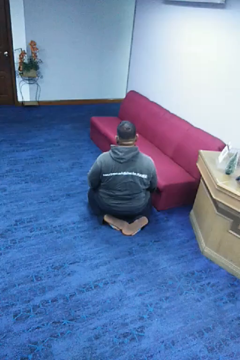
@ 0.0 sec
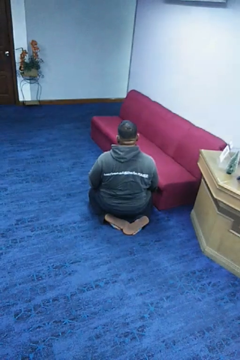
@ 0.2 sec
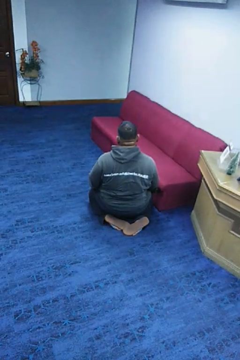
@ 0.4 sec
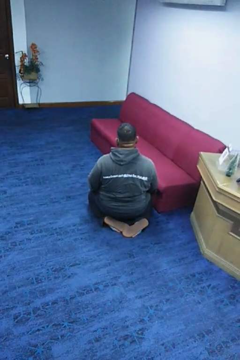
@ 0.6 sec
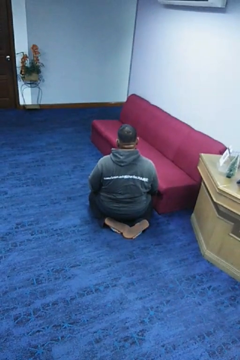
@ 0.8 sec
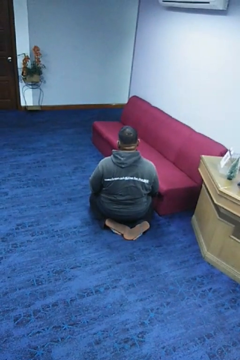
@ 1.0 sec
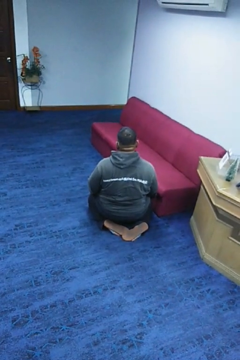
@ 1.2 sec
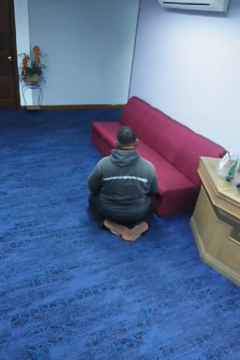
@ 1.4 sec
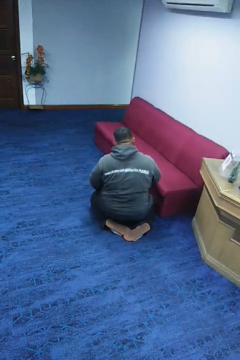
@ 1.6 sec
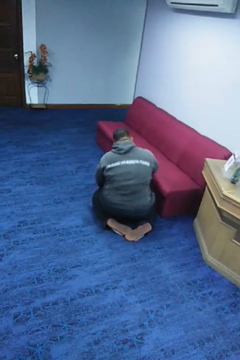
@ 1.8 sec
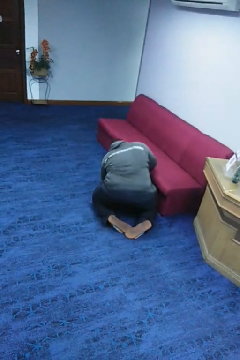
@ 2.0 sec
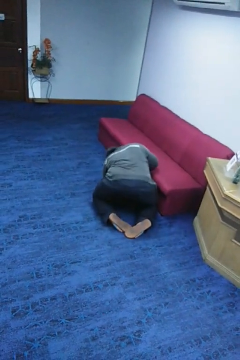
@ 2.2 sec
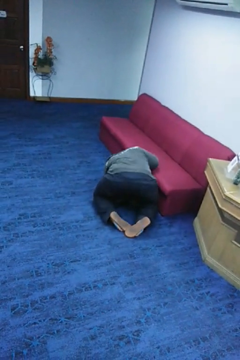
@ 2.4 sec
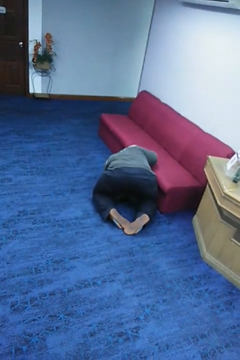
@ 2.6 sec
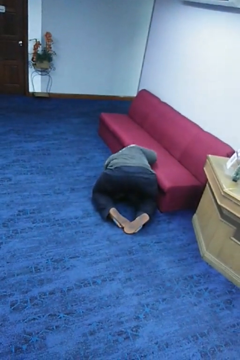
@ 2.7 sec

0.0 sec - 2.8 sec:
person searches under couch

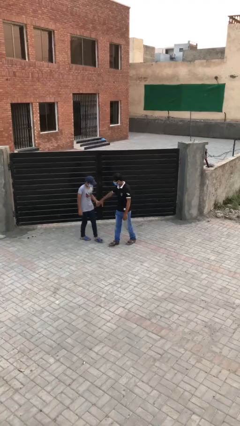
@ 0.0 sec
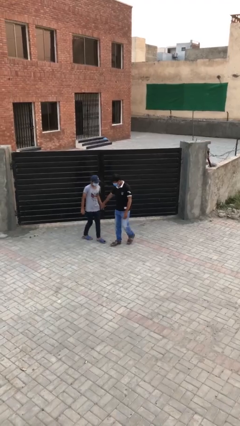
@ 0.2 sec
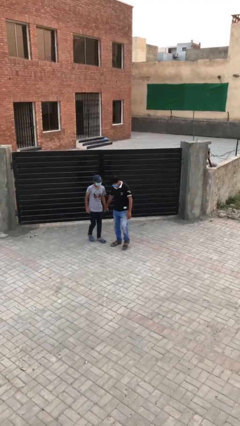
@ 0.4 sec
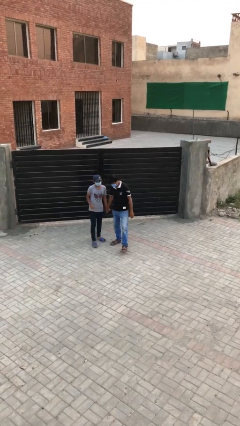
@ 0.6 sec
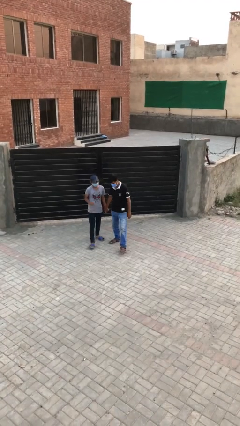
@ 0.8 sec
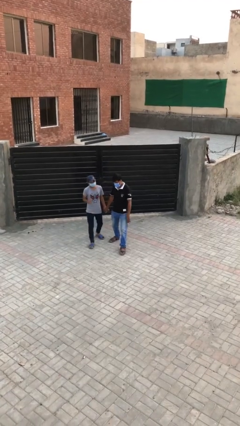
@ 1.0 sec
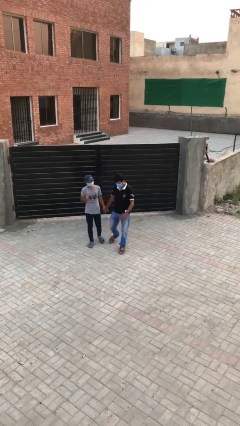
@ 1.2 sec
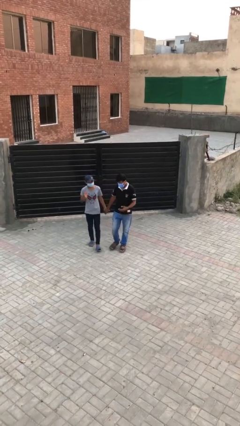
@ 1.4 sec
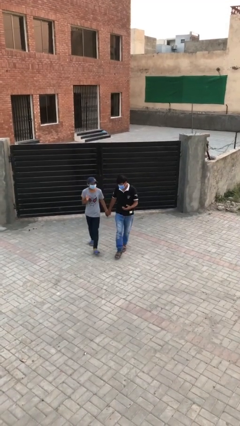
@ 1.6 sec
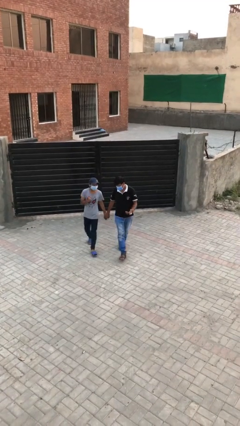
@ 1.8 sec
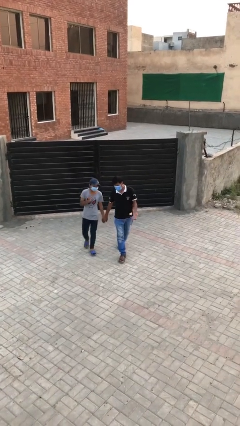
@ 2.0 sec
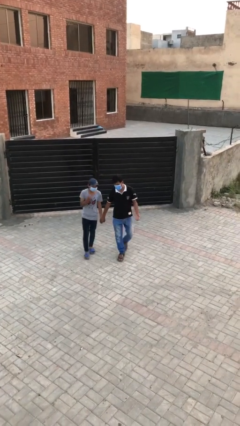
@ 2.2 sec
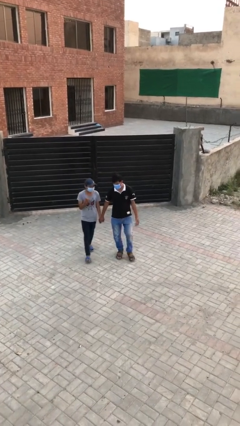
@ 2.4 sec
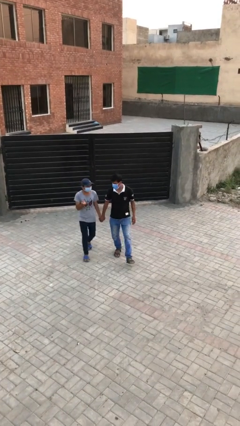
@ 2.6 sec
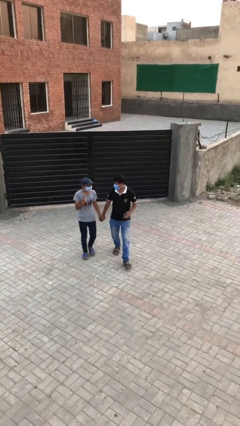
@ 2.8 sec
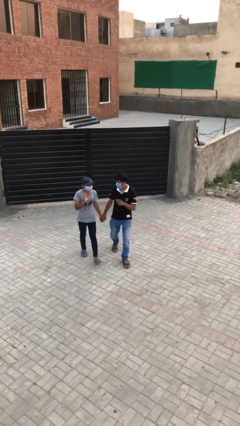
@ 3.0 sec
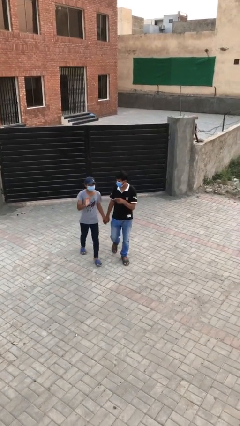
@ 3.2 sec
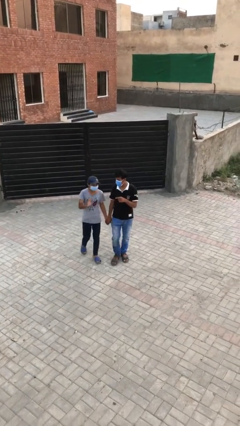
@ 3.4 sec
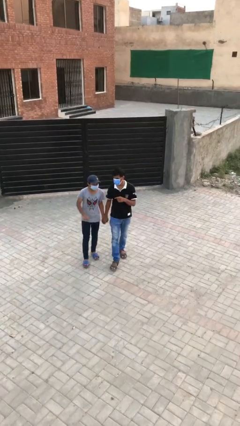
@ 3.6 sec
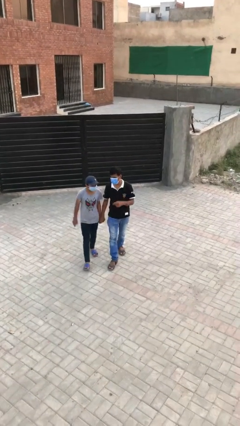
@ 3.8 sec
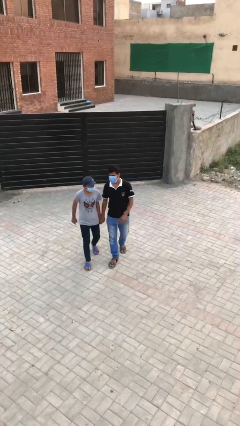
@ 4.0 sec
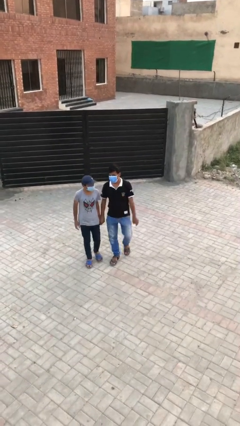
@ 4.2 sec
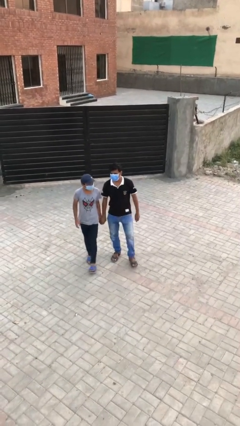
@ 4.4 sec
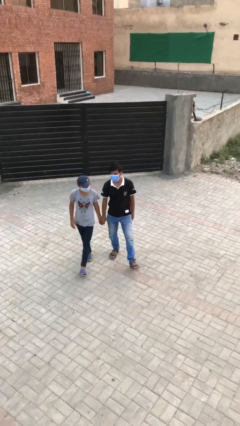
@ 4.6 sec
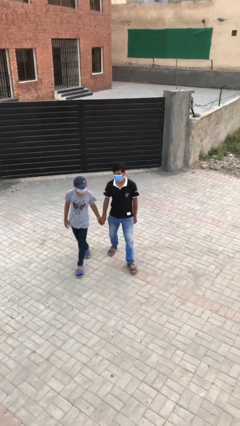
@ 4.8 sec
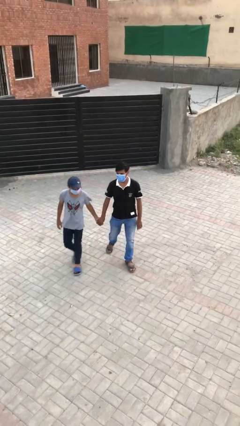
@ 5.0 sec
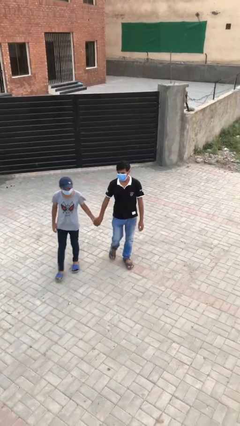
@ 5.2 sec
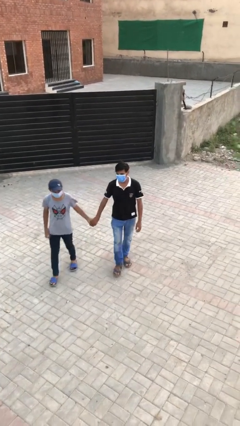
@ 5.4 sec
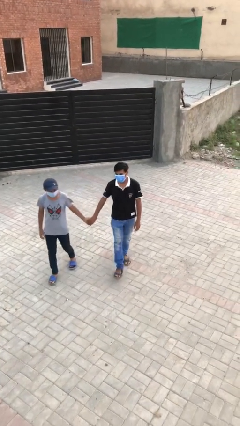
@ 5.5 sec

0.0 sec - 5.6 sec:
person holds hand

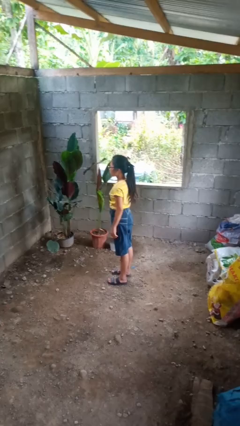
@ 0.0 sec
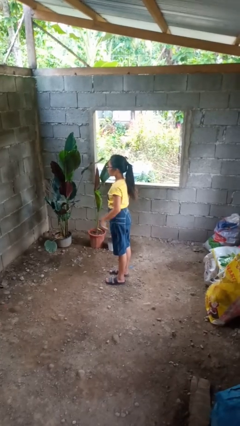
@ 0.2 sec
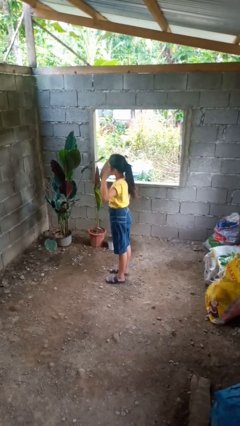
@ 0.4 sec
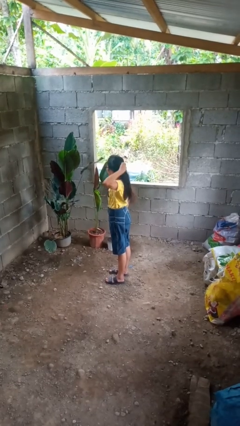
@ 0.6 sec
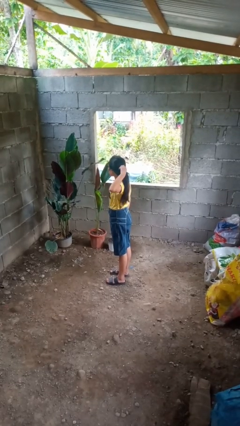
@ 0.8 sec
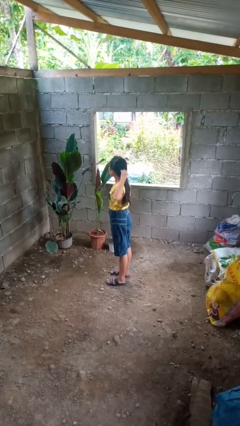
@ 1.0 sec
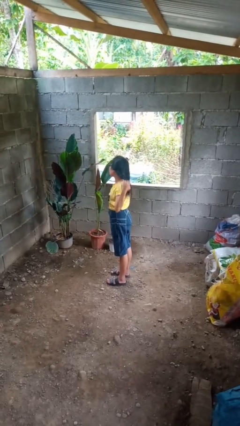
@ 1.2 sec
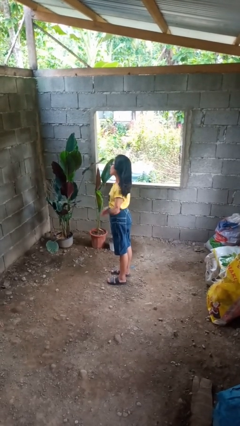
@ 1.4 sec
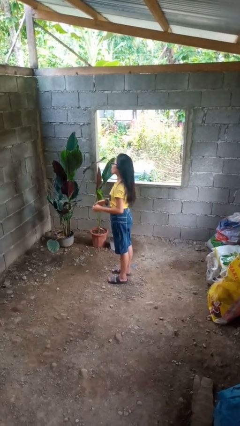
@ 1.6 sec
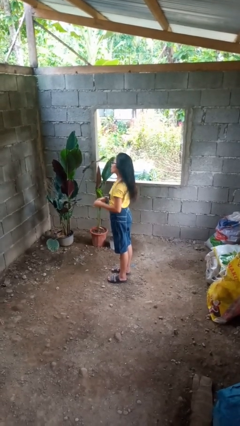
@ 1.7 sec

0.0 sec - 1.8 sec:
person takes off hairtie

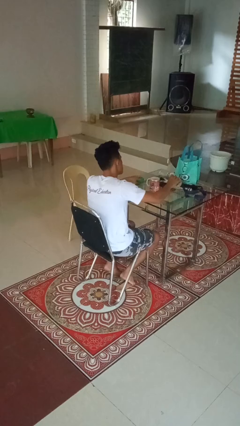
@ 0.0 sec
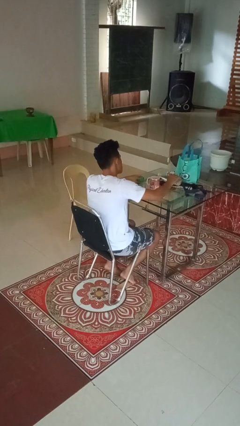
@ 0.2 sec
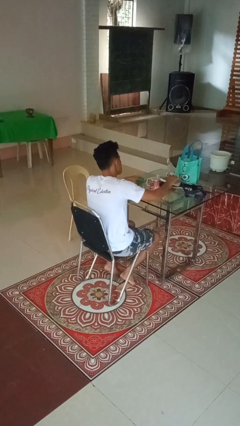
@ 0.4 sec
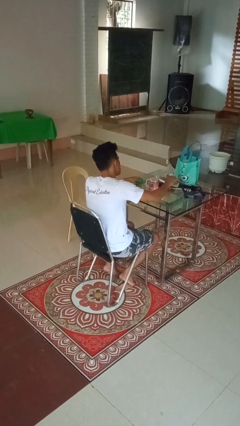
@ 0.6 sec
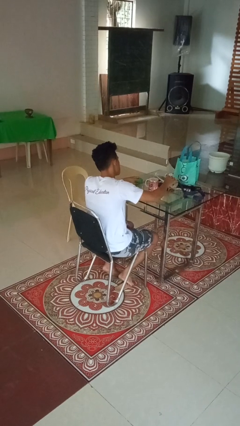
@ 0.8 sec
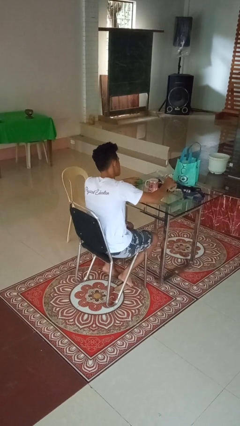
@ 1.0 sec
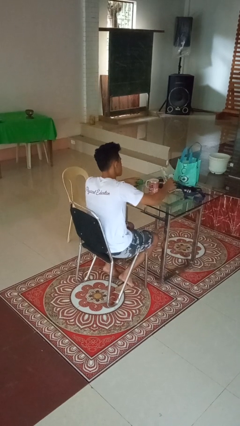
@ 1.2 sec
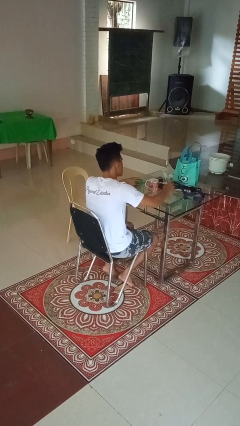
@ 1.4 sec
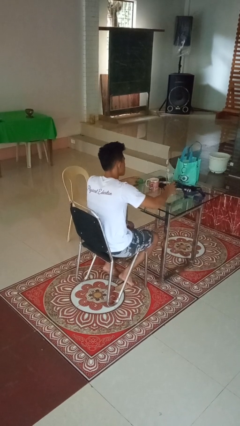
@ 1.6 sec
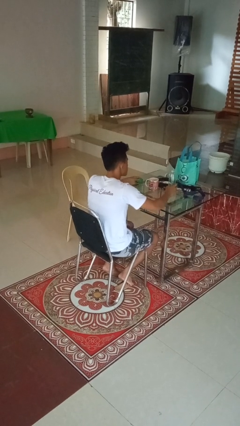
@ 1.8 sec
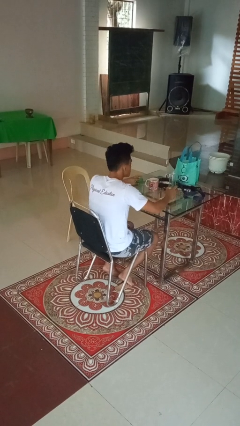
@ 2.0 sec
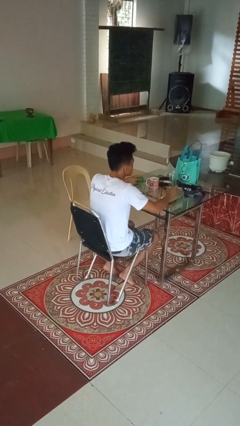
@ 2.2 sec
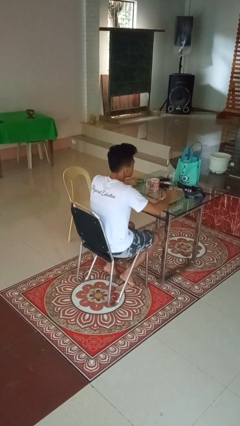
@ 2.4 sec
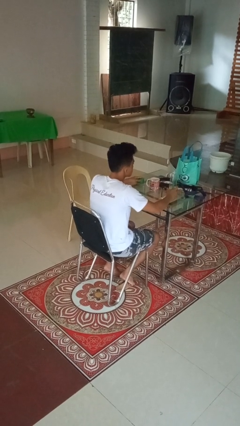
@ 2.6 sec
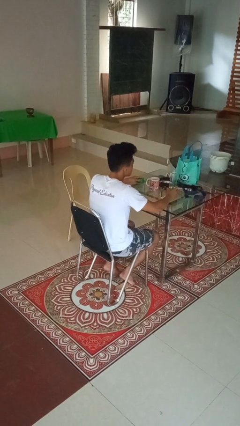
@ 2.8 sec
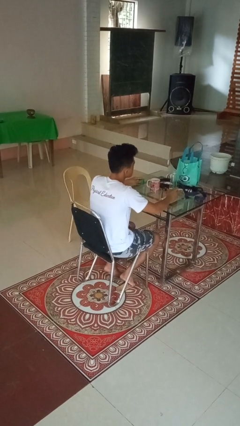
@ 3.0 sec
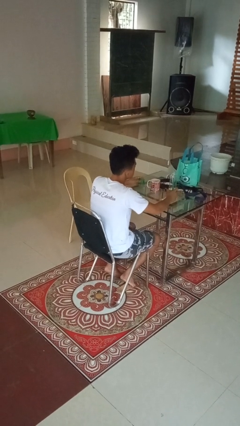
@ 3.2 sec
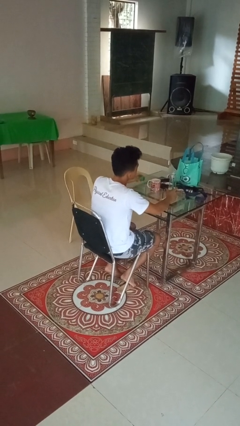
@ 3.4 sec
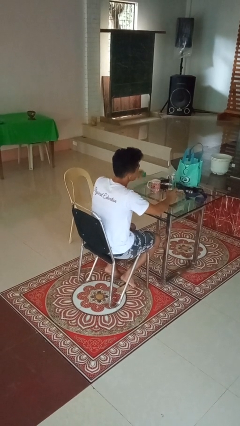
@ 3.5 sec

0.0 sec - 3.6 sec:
person pours liquid into cup

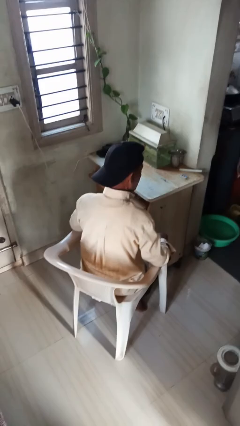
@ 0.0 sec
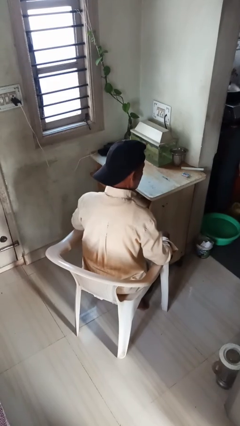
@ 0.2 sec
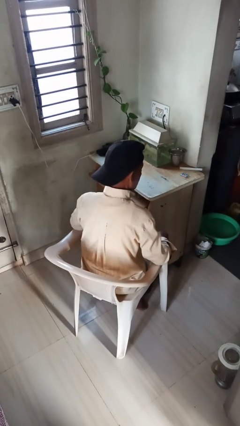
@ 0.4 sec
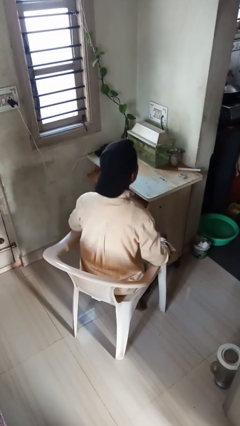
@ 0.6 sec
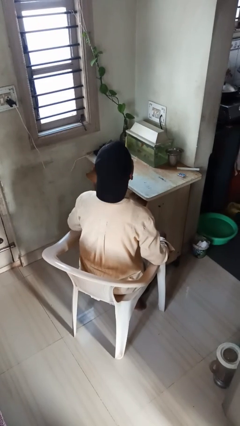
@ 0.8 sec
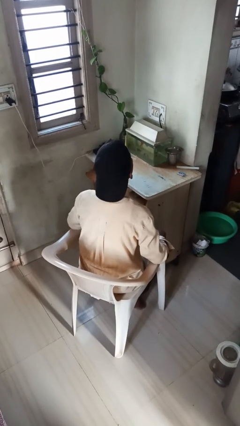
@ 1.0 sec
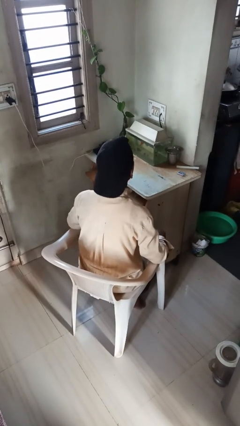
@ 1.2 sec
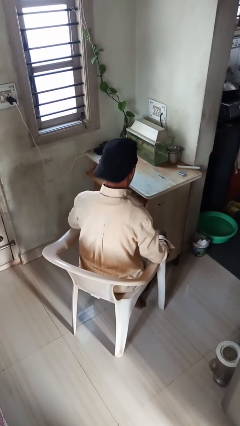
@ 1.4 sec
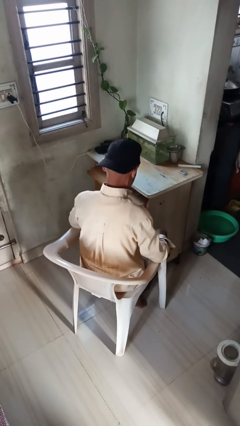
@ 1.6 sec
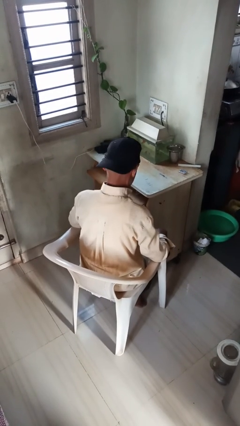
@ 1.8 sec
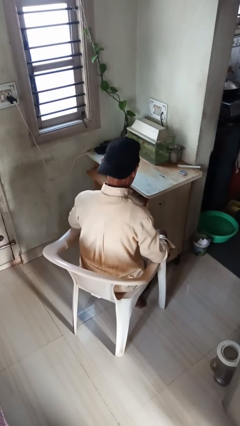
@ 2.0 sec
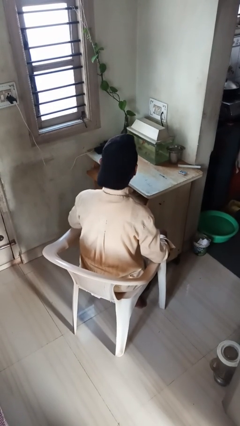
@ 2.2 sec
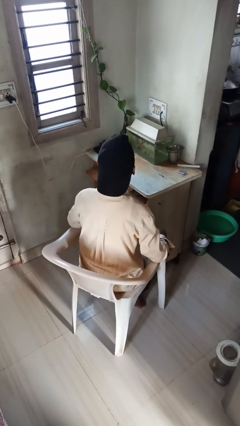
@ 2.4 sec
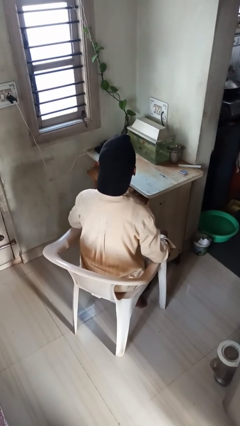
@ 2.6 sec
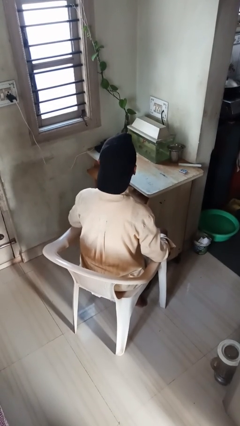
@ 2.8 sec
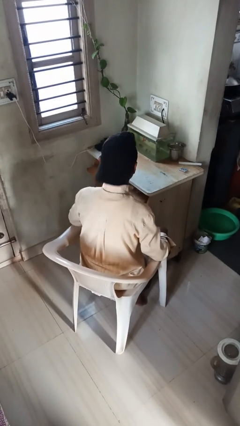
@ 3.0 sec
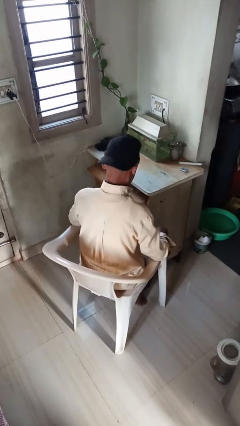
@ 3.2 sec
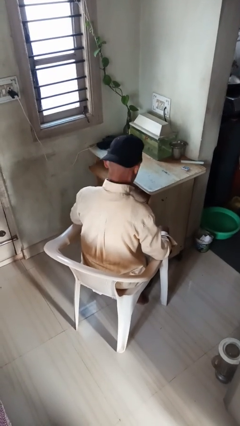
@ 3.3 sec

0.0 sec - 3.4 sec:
person nods head

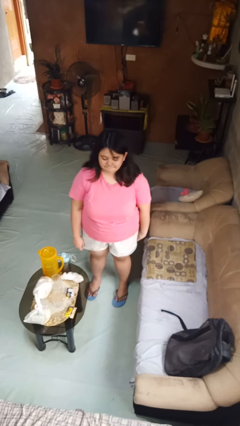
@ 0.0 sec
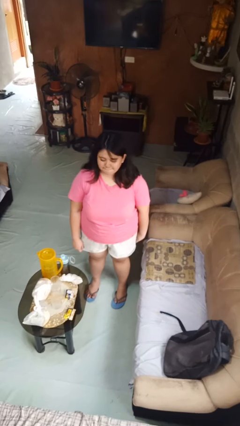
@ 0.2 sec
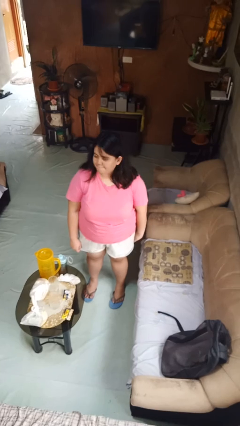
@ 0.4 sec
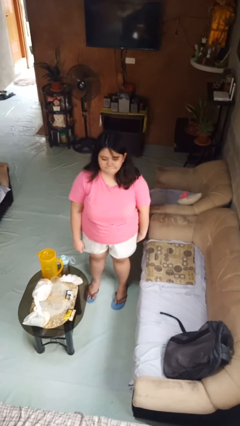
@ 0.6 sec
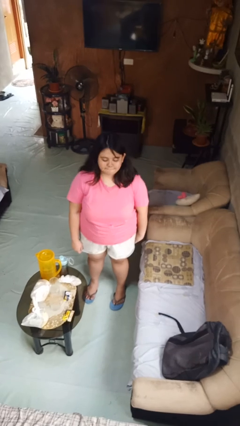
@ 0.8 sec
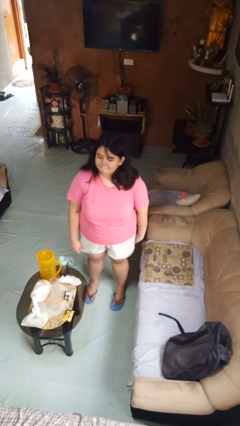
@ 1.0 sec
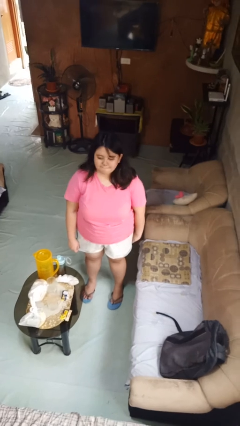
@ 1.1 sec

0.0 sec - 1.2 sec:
person shakes head
